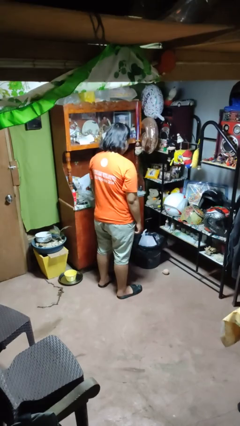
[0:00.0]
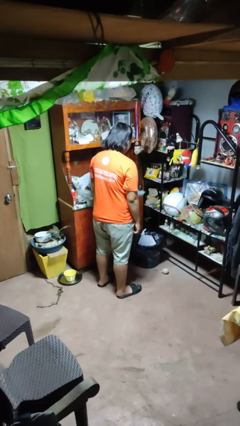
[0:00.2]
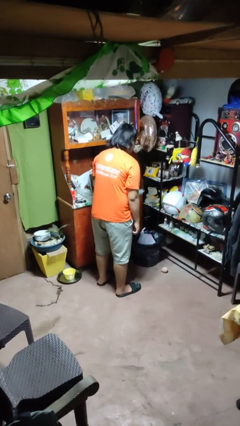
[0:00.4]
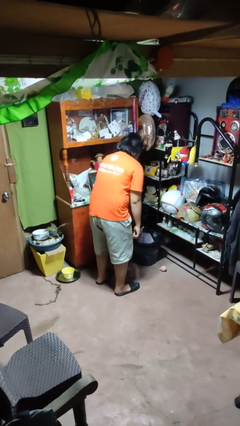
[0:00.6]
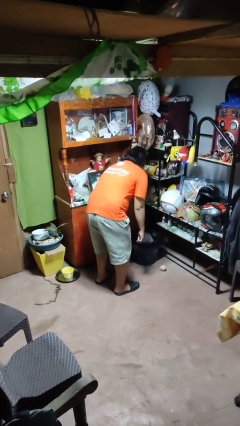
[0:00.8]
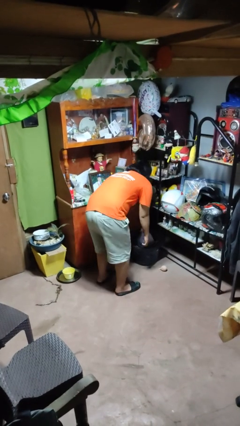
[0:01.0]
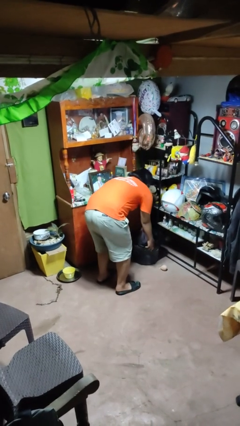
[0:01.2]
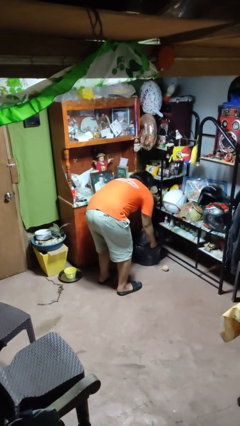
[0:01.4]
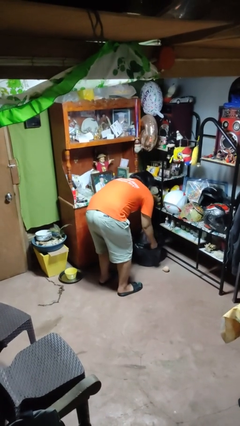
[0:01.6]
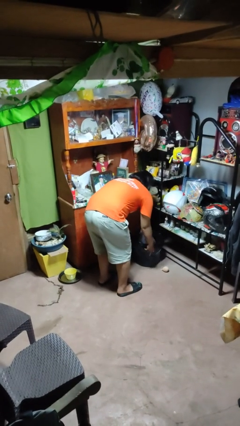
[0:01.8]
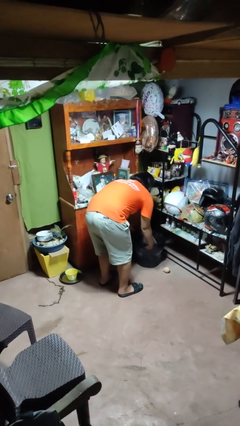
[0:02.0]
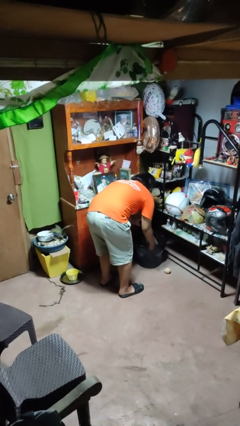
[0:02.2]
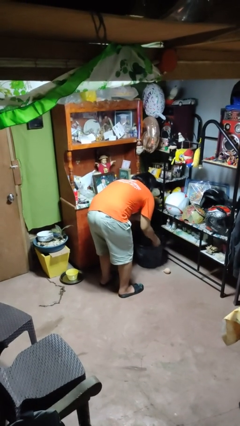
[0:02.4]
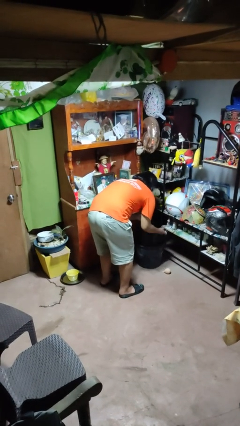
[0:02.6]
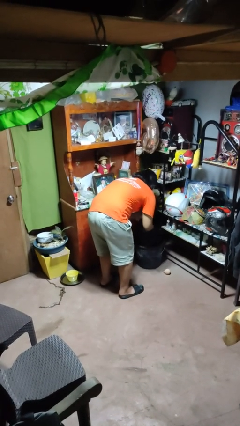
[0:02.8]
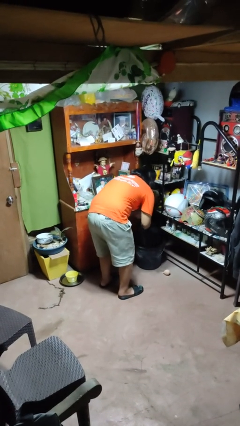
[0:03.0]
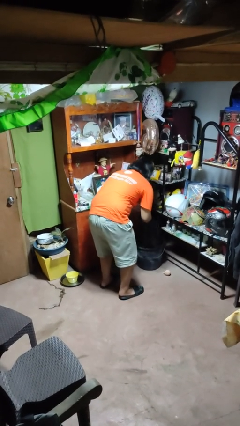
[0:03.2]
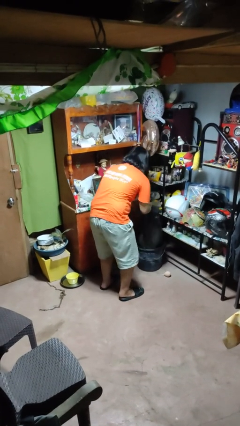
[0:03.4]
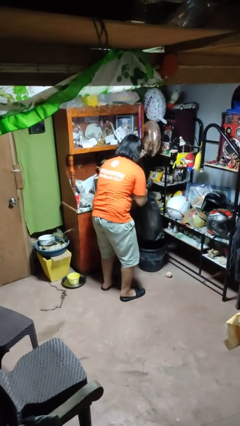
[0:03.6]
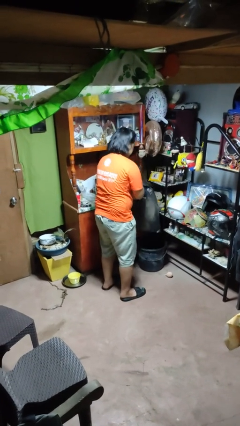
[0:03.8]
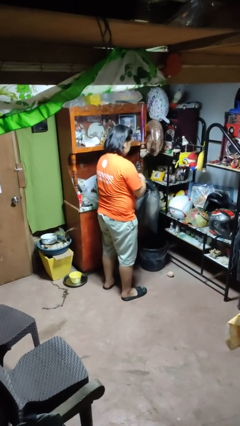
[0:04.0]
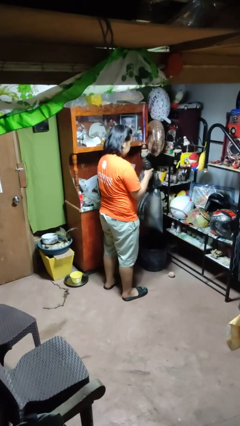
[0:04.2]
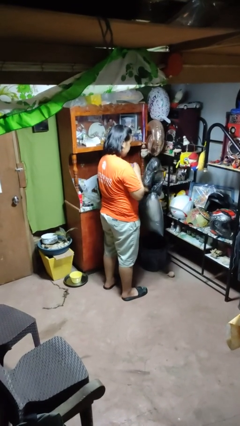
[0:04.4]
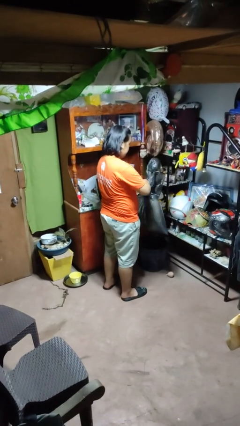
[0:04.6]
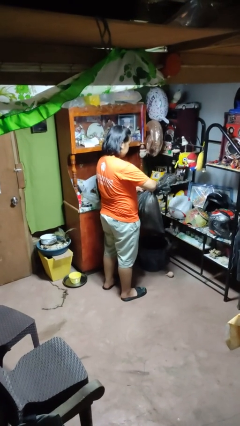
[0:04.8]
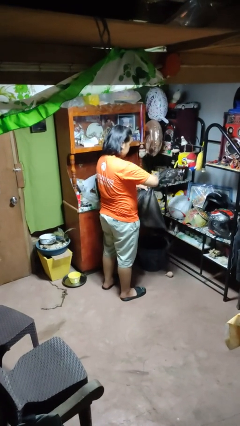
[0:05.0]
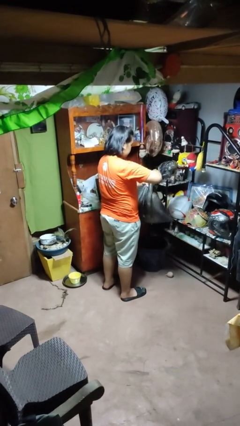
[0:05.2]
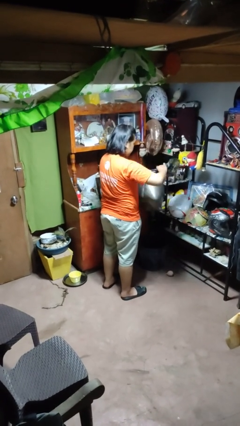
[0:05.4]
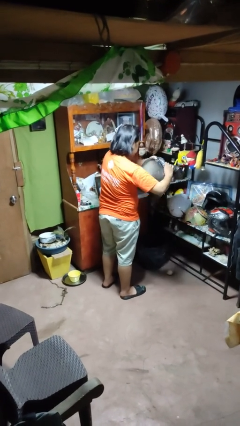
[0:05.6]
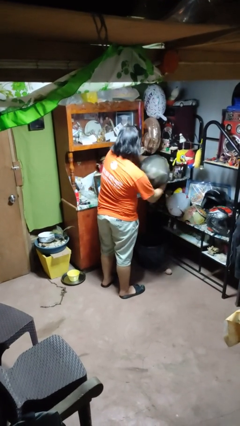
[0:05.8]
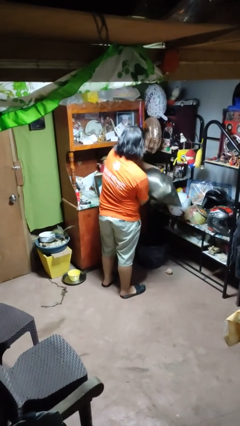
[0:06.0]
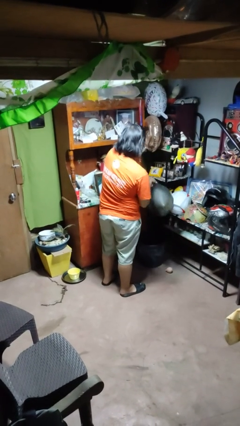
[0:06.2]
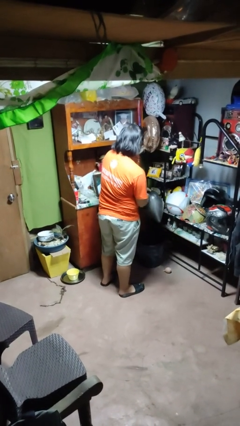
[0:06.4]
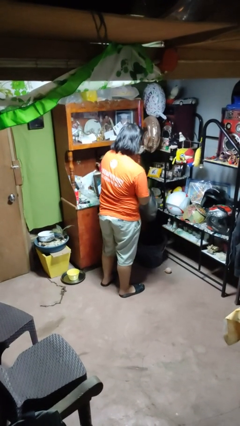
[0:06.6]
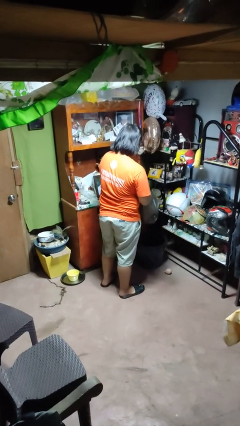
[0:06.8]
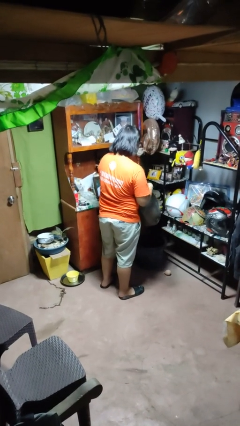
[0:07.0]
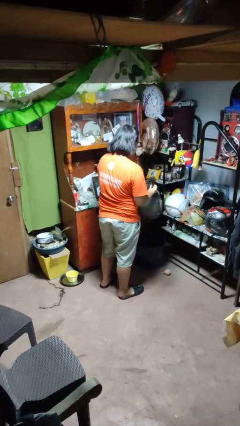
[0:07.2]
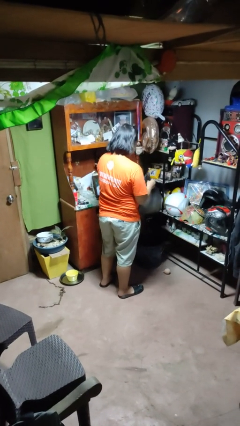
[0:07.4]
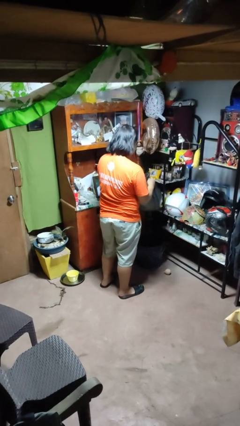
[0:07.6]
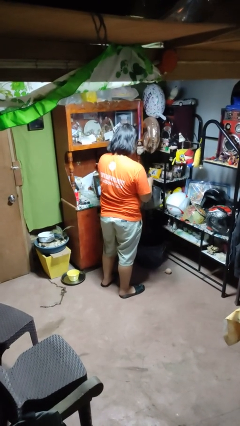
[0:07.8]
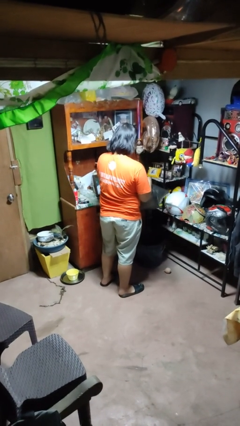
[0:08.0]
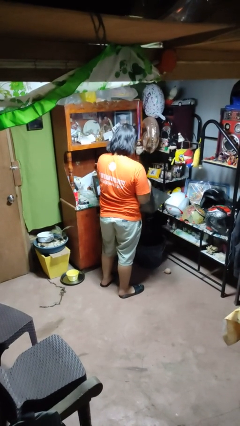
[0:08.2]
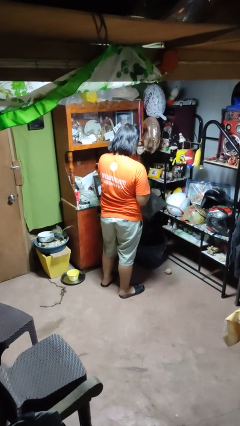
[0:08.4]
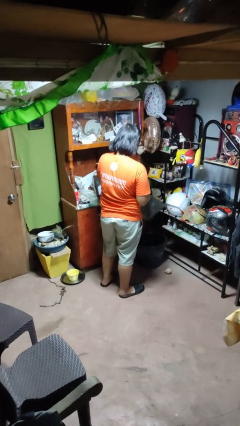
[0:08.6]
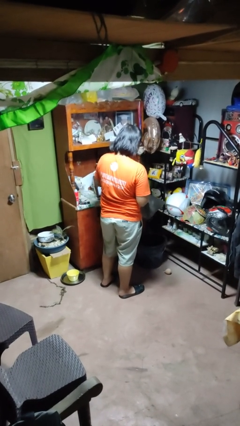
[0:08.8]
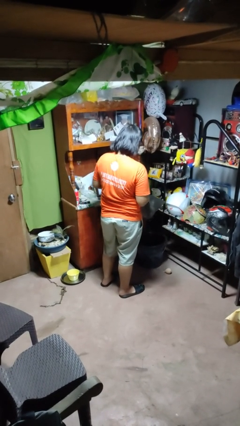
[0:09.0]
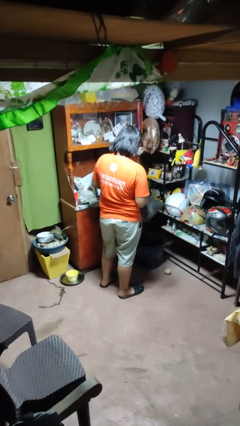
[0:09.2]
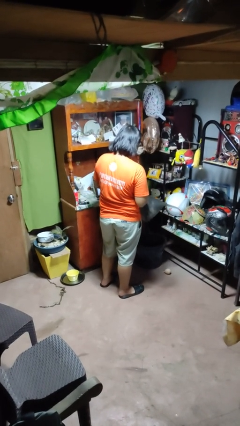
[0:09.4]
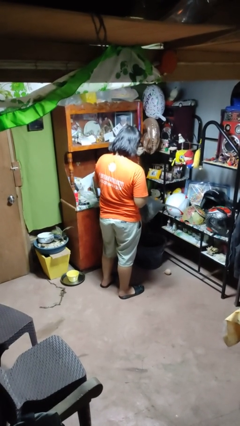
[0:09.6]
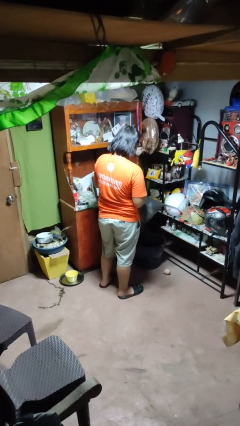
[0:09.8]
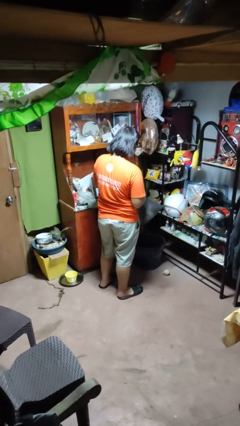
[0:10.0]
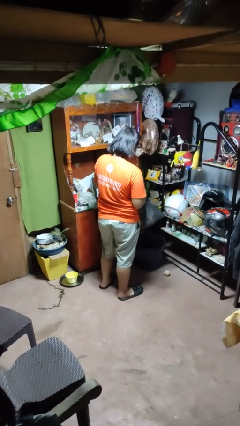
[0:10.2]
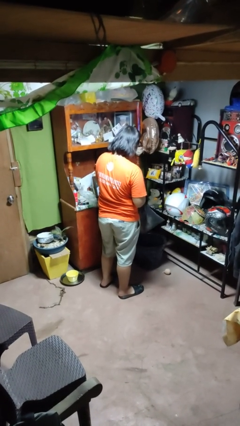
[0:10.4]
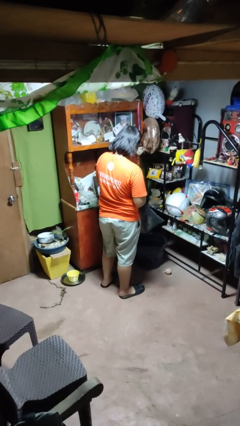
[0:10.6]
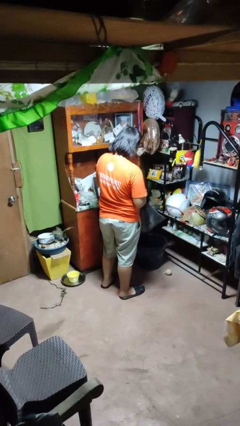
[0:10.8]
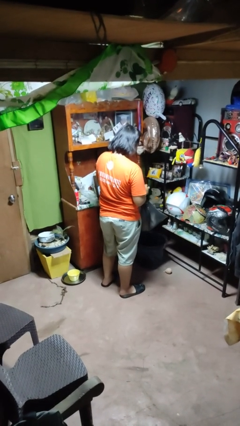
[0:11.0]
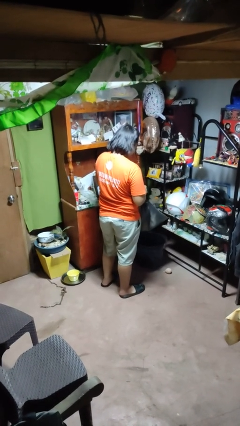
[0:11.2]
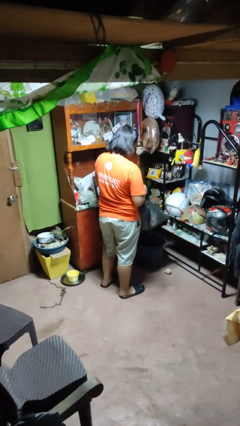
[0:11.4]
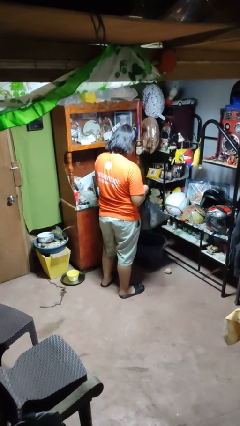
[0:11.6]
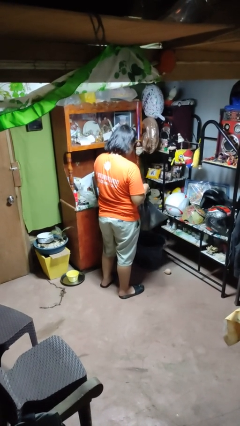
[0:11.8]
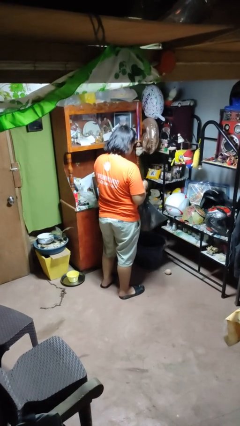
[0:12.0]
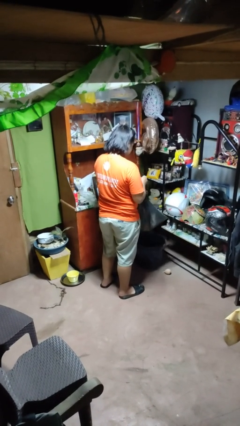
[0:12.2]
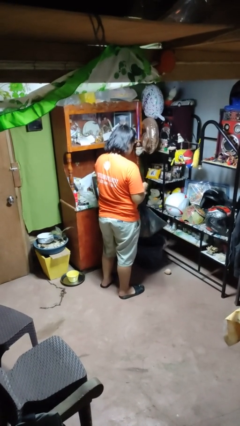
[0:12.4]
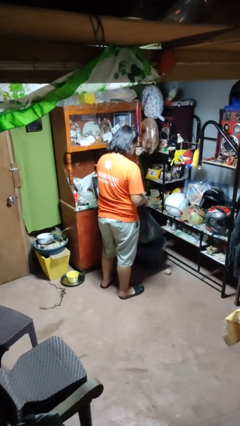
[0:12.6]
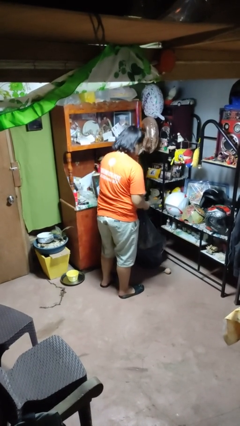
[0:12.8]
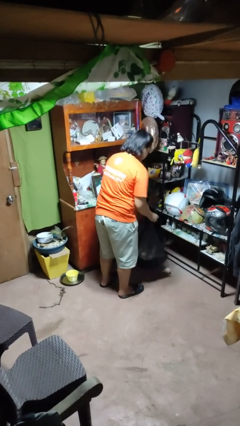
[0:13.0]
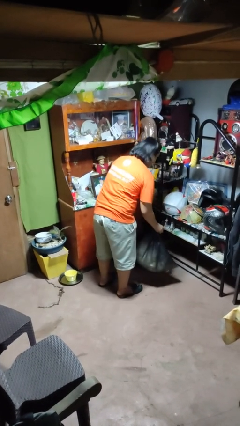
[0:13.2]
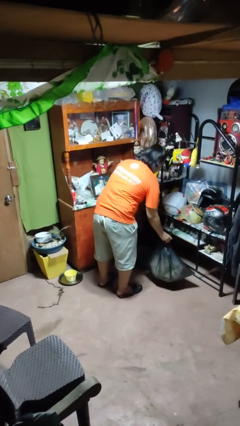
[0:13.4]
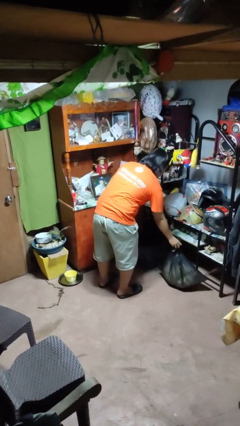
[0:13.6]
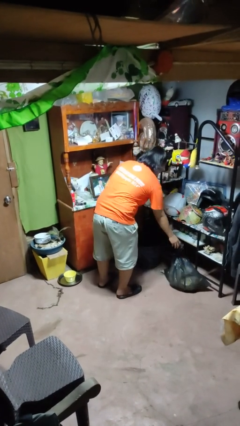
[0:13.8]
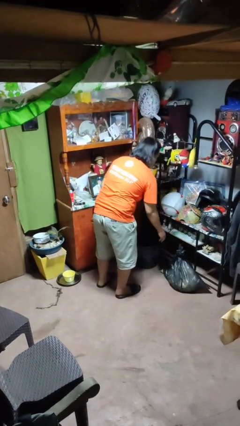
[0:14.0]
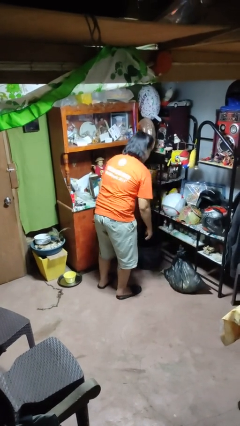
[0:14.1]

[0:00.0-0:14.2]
person removes trashbag from trashcan

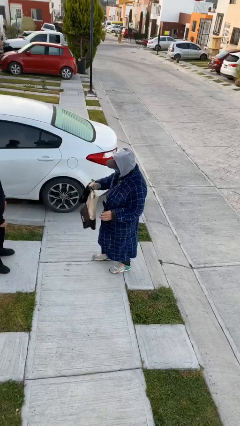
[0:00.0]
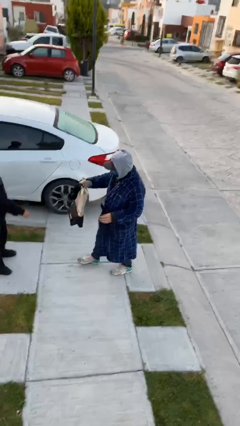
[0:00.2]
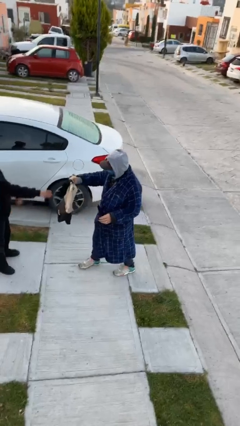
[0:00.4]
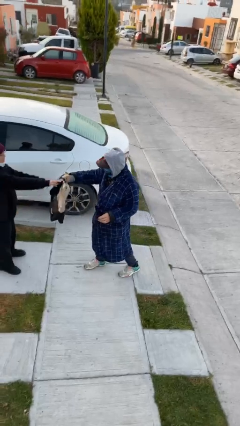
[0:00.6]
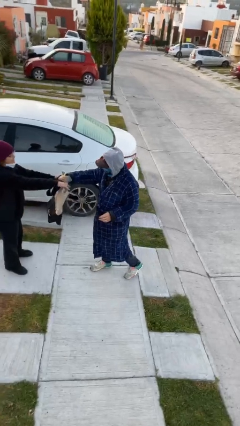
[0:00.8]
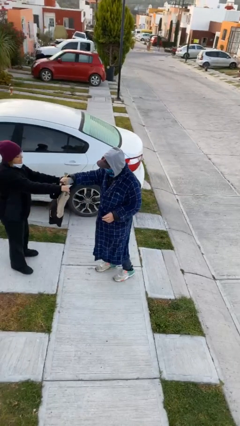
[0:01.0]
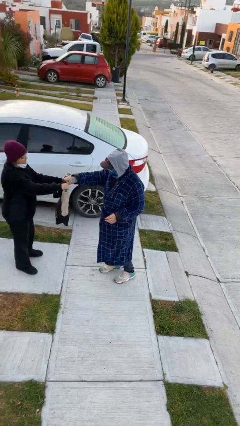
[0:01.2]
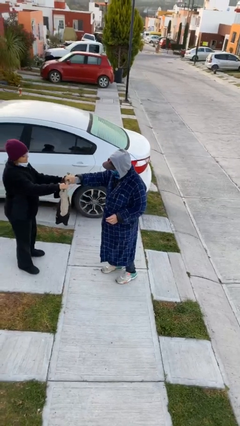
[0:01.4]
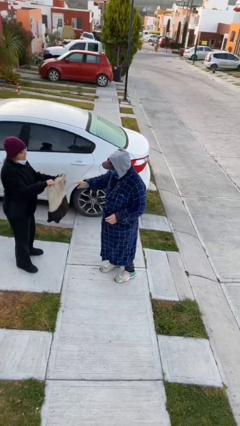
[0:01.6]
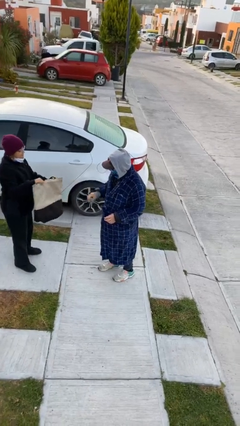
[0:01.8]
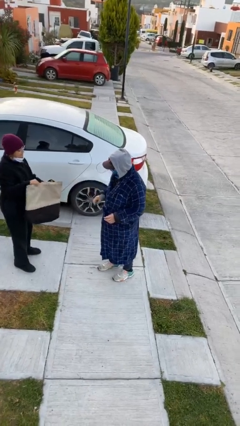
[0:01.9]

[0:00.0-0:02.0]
person transfers object to person

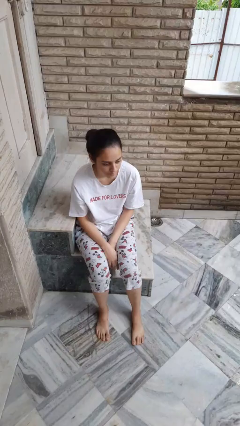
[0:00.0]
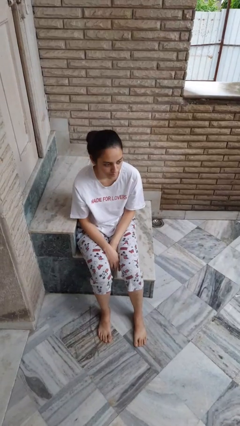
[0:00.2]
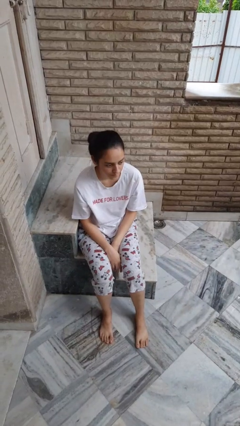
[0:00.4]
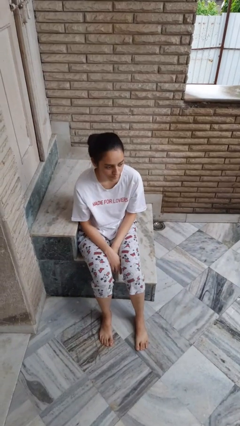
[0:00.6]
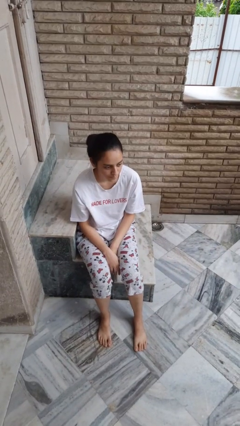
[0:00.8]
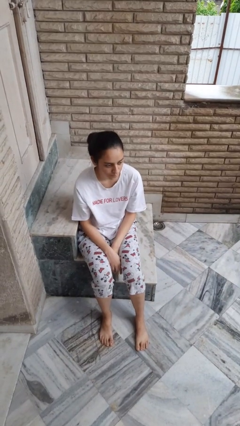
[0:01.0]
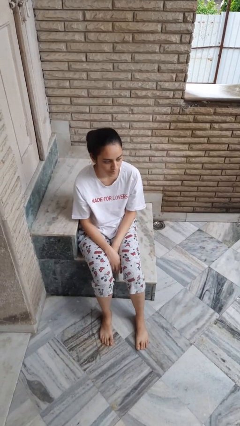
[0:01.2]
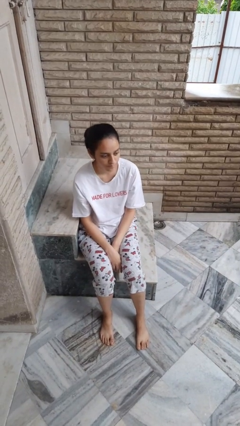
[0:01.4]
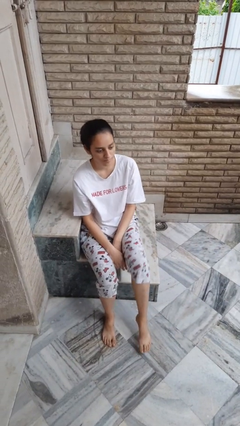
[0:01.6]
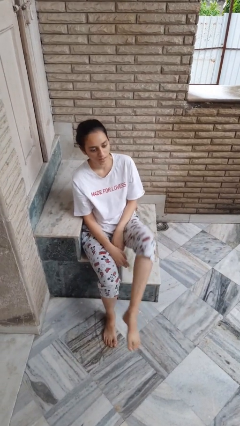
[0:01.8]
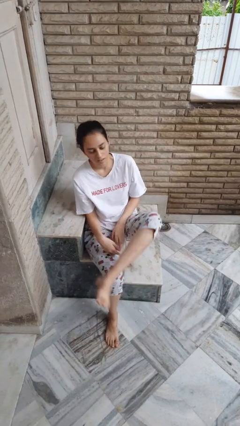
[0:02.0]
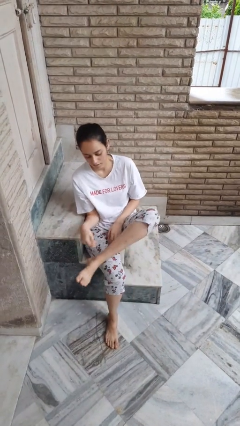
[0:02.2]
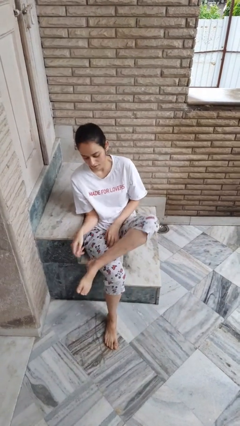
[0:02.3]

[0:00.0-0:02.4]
person rubs foot
